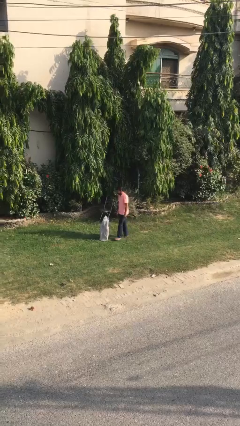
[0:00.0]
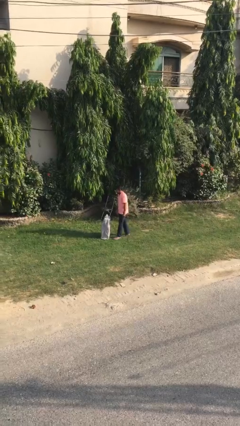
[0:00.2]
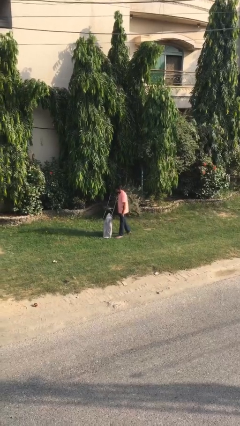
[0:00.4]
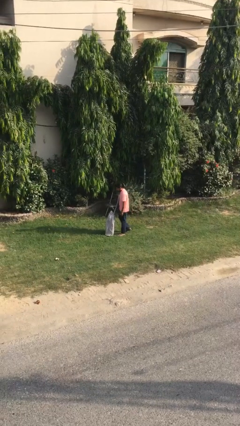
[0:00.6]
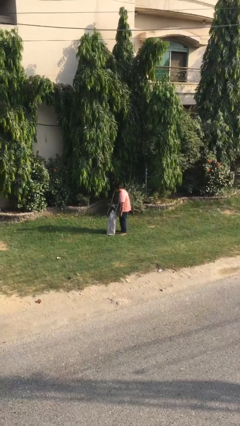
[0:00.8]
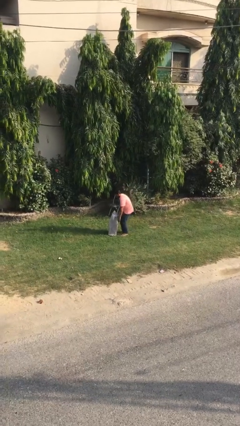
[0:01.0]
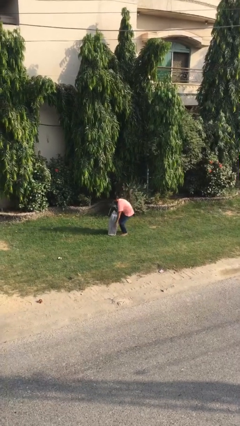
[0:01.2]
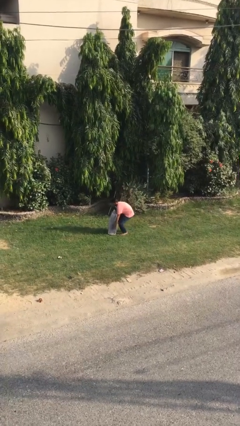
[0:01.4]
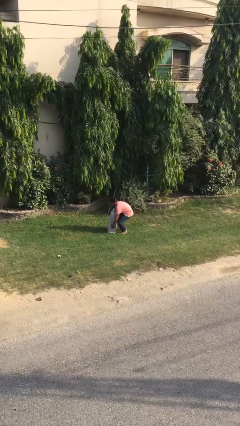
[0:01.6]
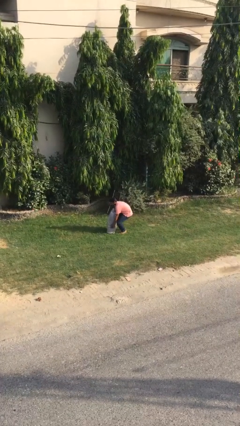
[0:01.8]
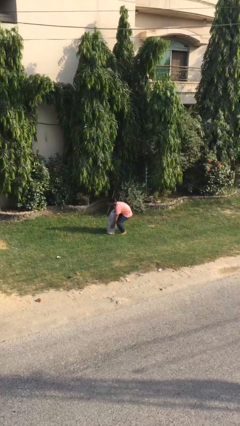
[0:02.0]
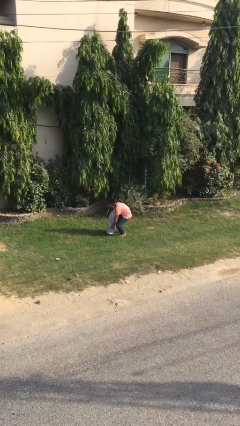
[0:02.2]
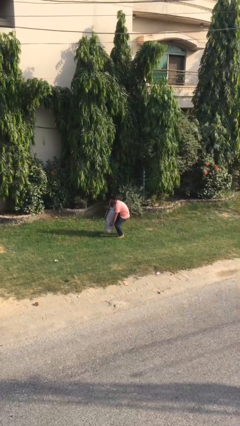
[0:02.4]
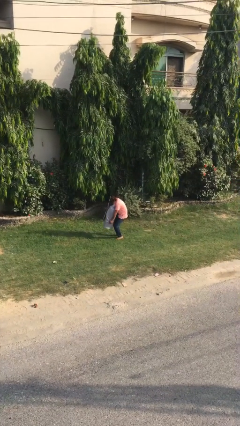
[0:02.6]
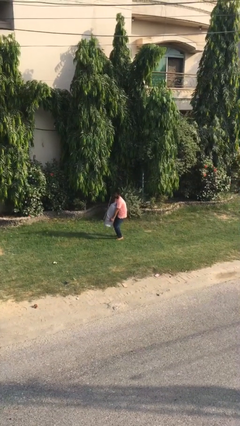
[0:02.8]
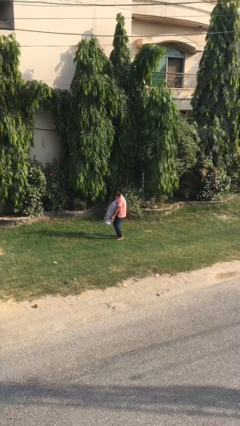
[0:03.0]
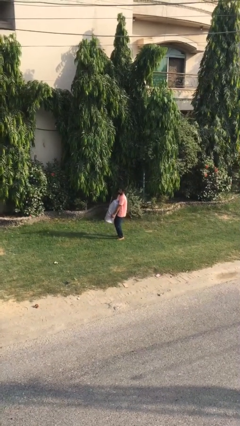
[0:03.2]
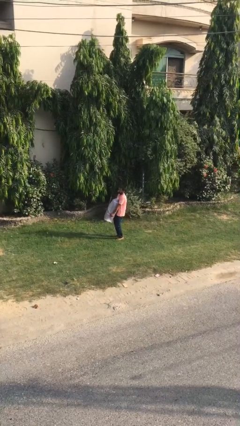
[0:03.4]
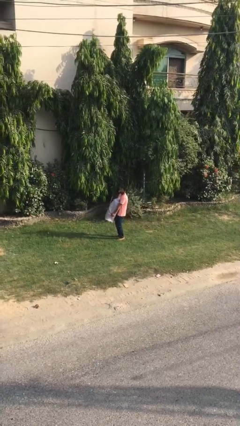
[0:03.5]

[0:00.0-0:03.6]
person picks up object from floor

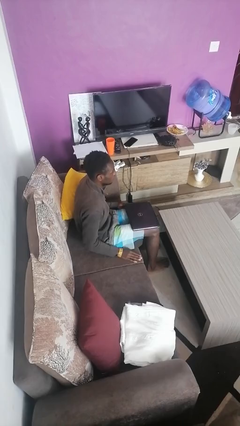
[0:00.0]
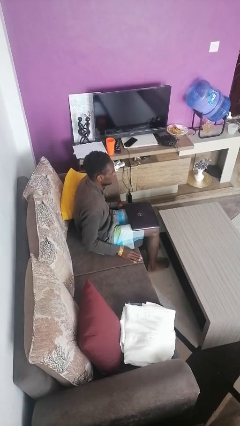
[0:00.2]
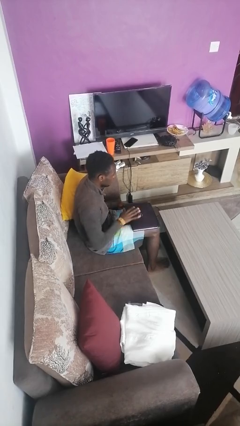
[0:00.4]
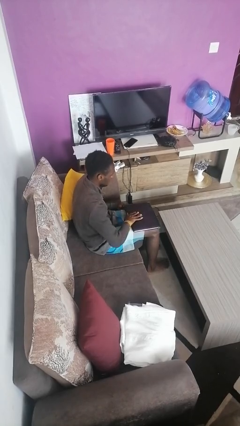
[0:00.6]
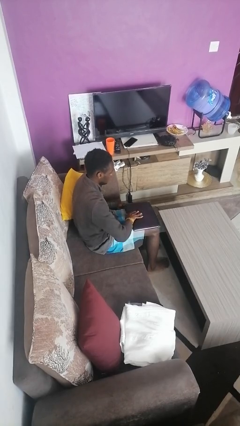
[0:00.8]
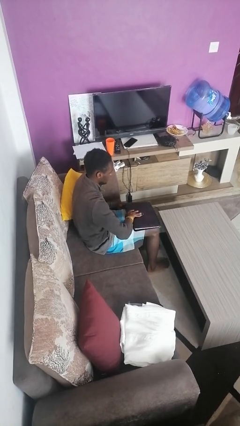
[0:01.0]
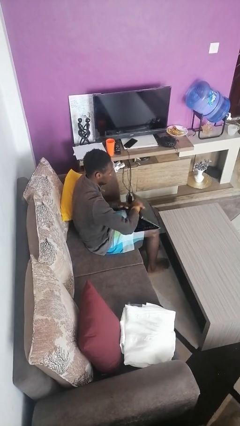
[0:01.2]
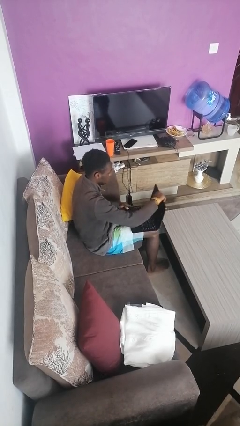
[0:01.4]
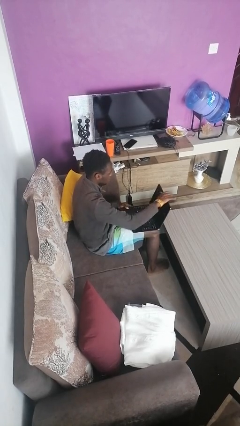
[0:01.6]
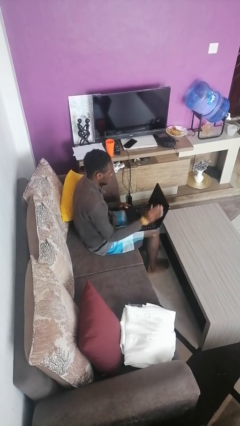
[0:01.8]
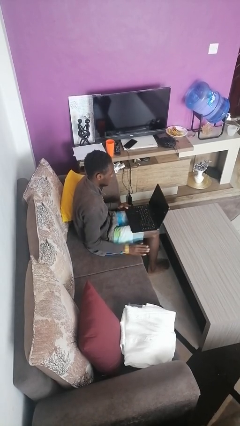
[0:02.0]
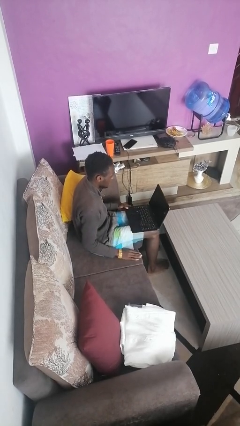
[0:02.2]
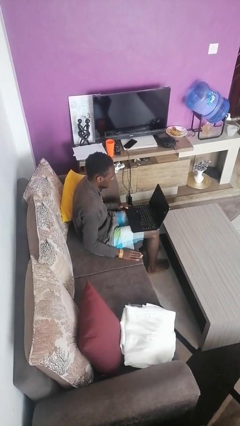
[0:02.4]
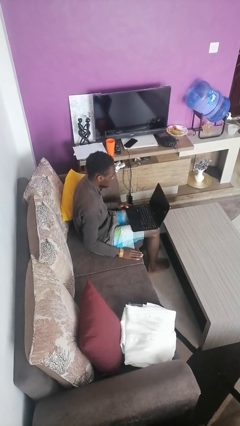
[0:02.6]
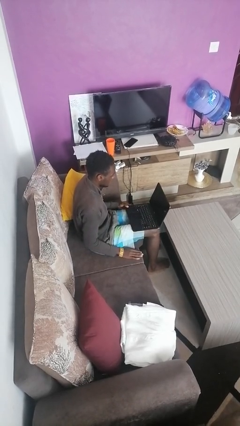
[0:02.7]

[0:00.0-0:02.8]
person opens laptop

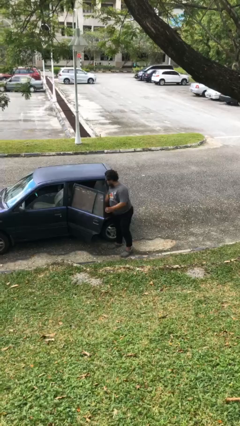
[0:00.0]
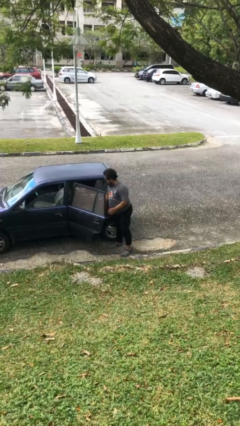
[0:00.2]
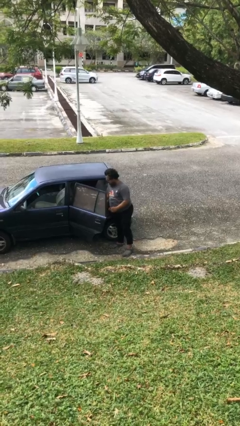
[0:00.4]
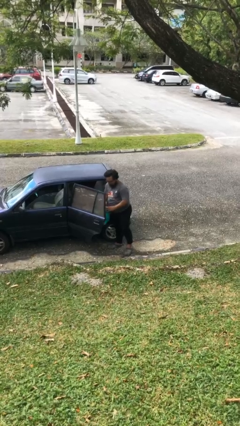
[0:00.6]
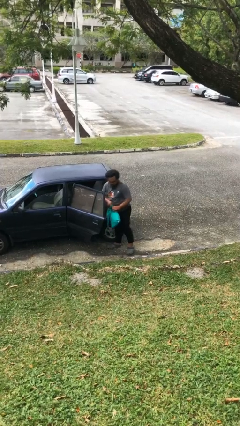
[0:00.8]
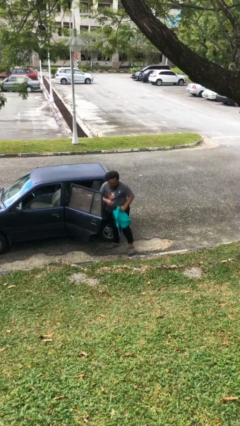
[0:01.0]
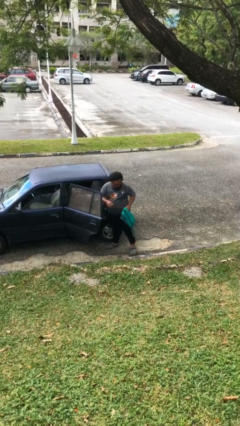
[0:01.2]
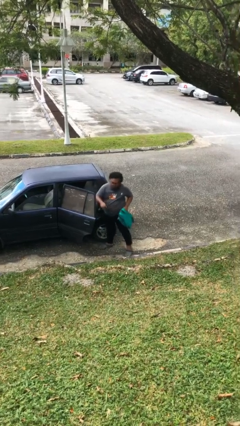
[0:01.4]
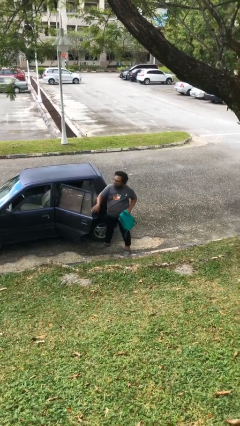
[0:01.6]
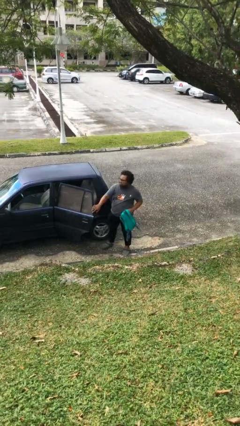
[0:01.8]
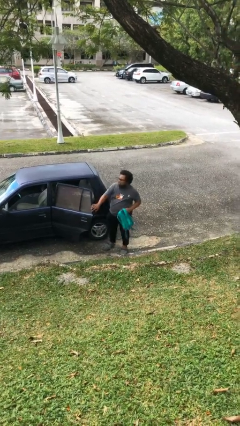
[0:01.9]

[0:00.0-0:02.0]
person unloads car

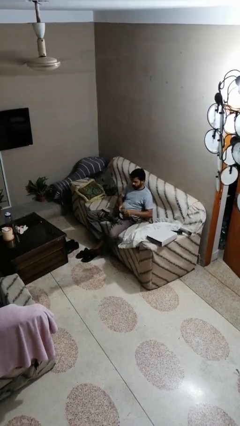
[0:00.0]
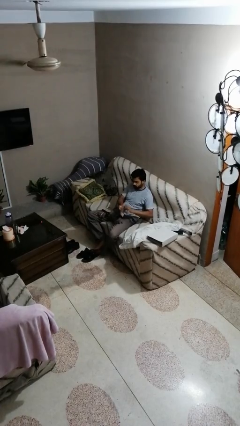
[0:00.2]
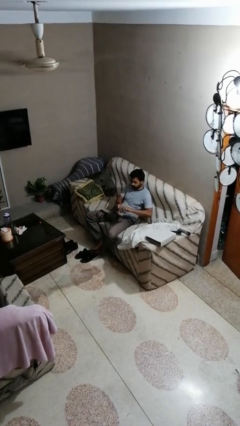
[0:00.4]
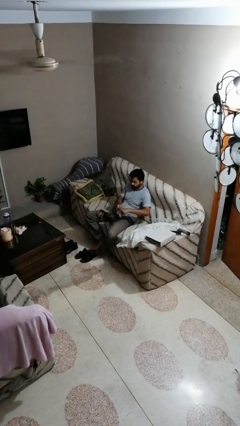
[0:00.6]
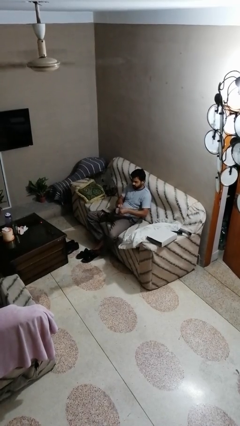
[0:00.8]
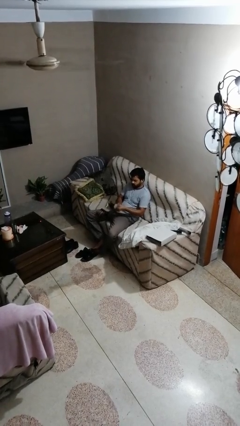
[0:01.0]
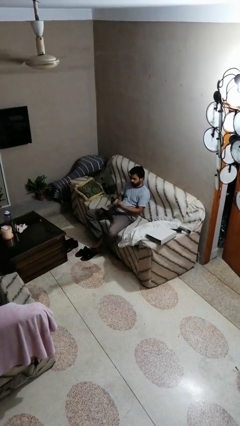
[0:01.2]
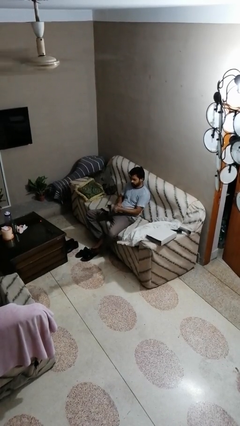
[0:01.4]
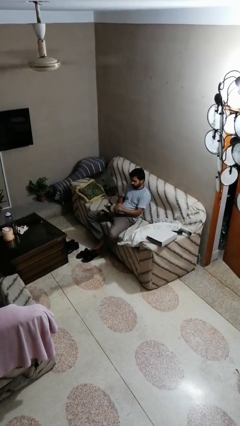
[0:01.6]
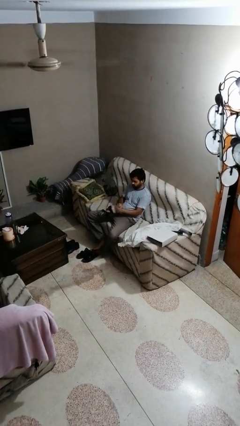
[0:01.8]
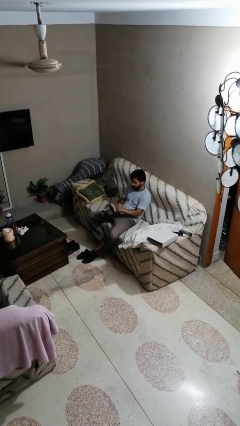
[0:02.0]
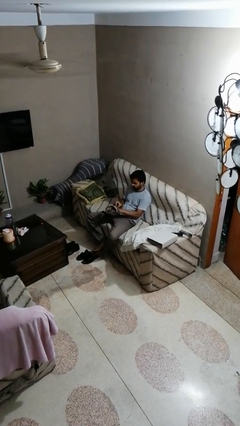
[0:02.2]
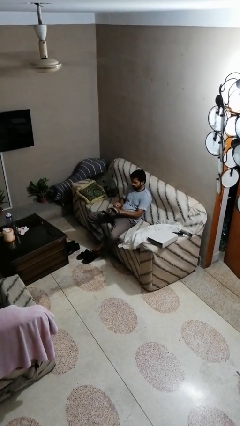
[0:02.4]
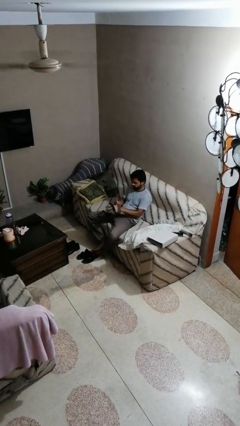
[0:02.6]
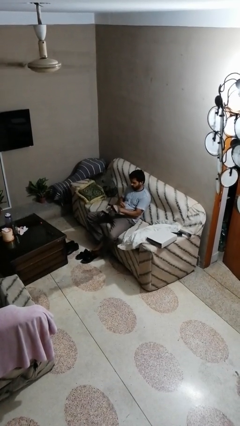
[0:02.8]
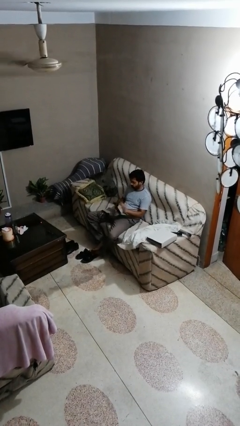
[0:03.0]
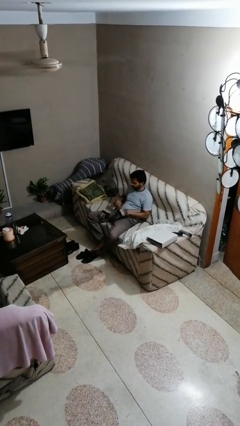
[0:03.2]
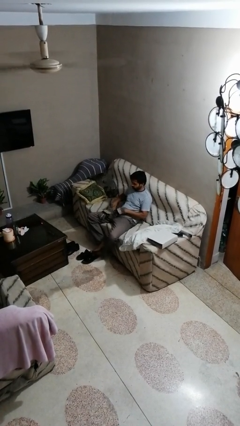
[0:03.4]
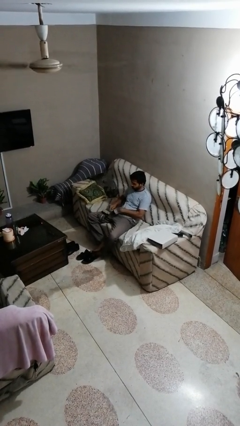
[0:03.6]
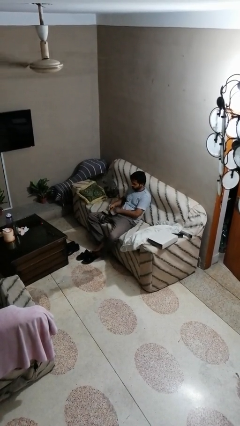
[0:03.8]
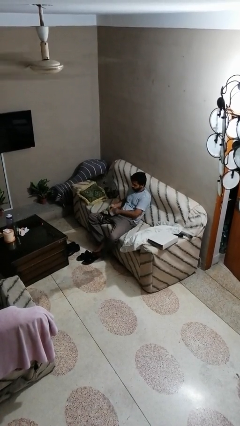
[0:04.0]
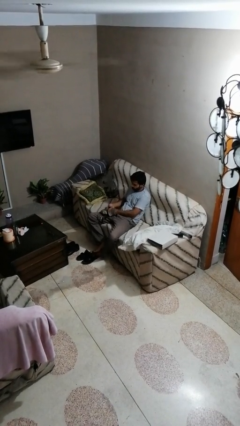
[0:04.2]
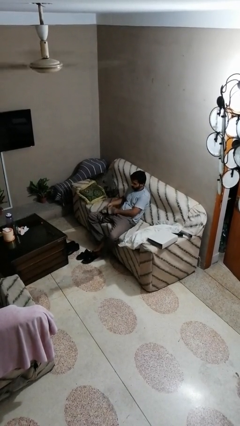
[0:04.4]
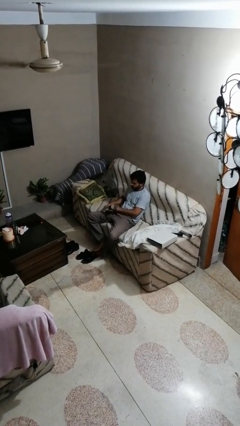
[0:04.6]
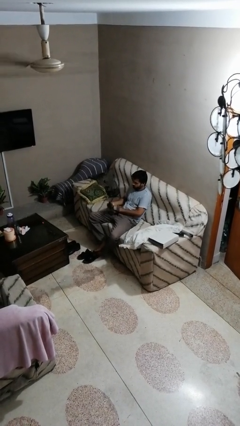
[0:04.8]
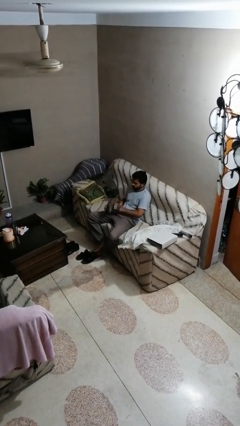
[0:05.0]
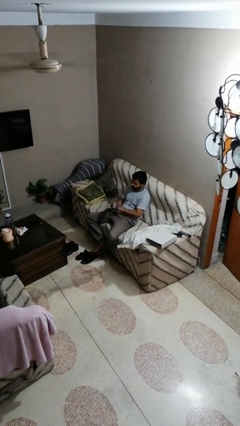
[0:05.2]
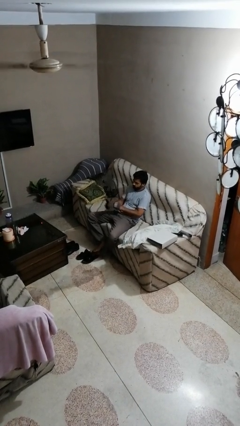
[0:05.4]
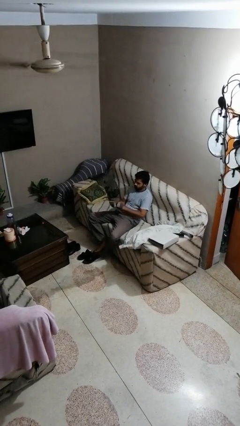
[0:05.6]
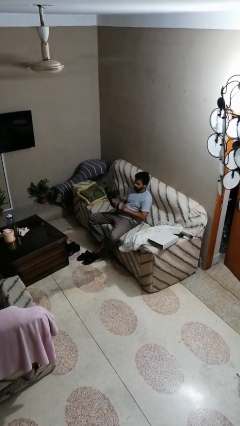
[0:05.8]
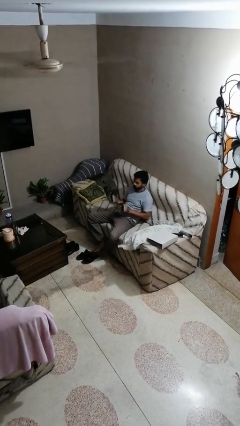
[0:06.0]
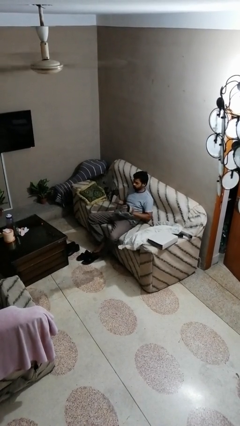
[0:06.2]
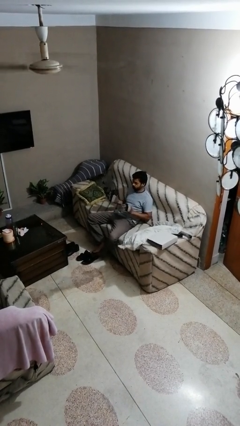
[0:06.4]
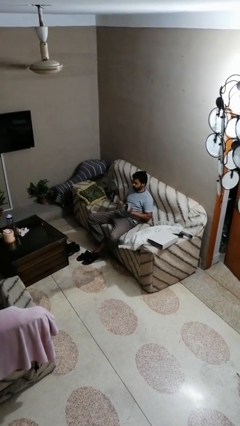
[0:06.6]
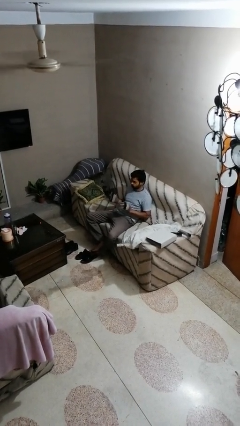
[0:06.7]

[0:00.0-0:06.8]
person puts on gloves

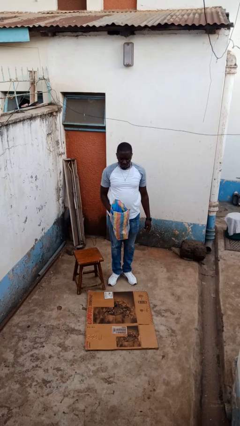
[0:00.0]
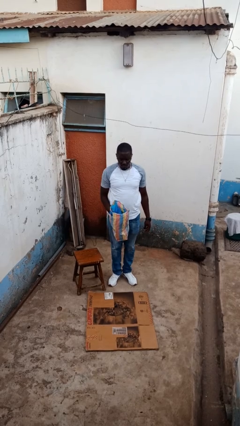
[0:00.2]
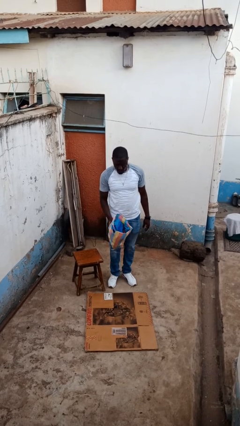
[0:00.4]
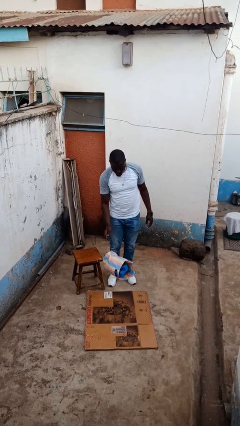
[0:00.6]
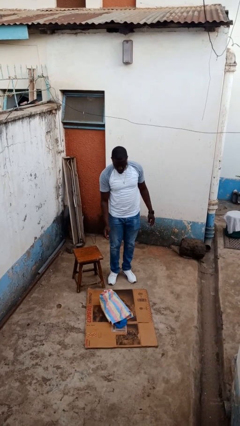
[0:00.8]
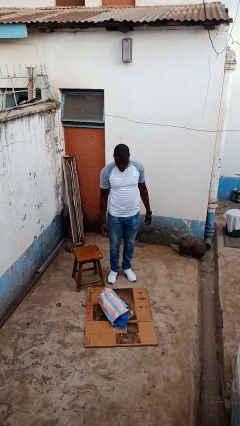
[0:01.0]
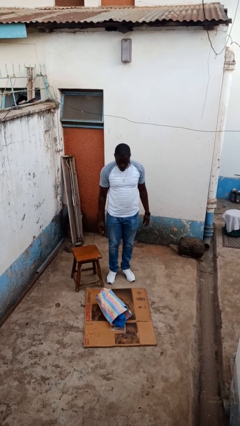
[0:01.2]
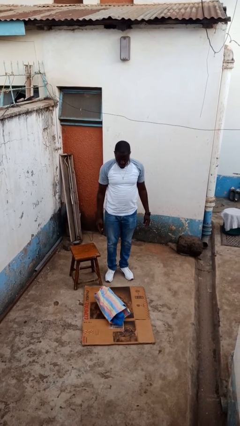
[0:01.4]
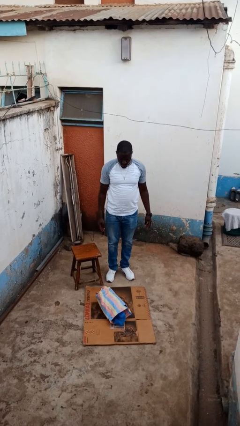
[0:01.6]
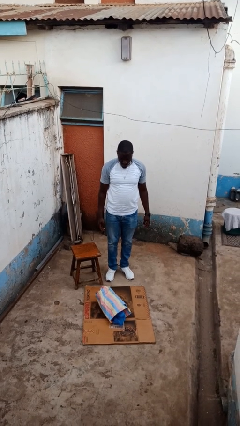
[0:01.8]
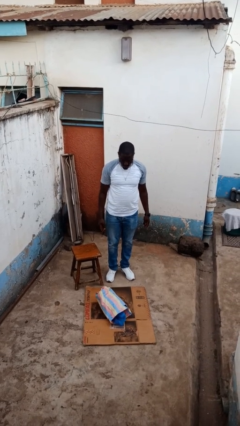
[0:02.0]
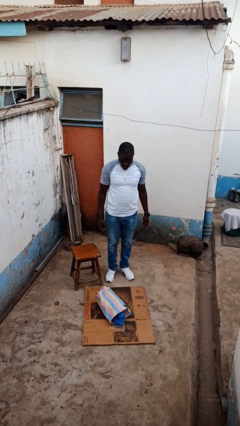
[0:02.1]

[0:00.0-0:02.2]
person drops object
